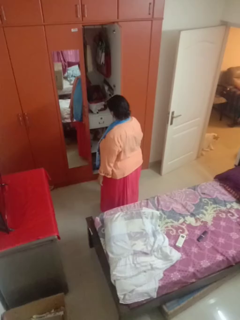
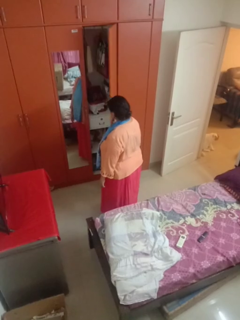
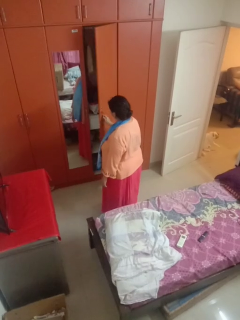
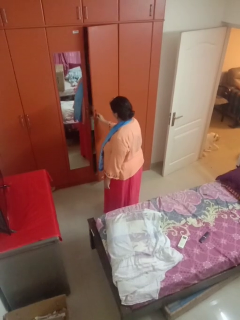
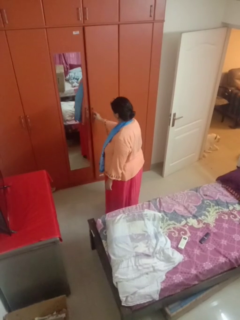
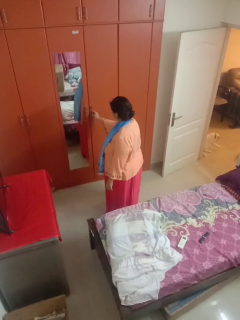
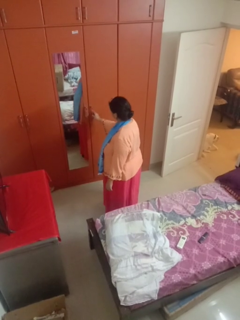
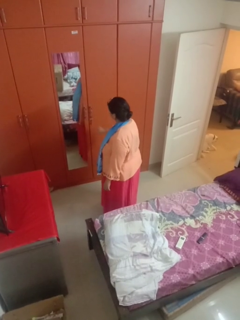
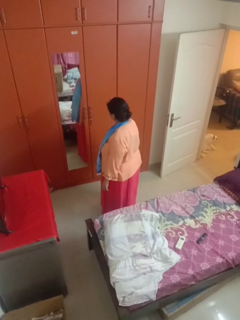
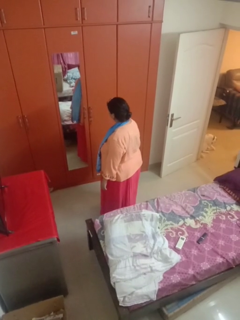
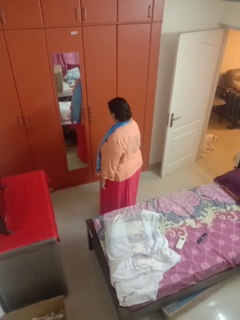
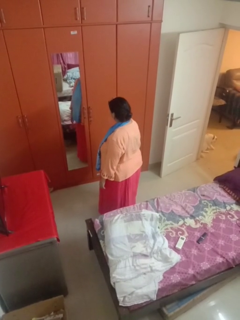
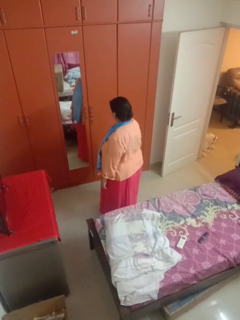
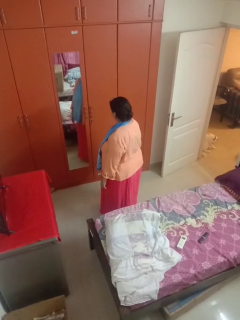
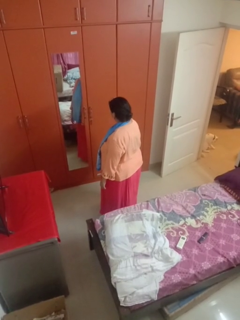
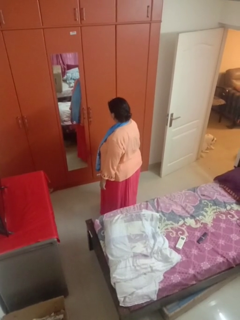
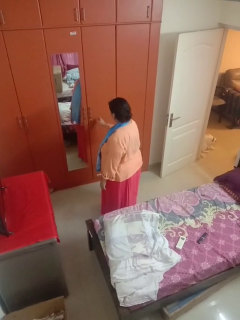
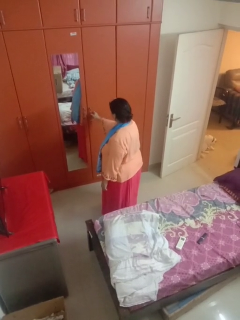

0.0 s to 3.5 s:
person closes closet door

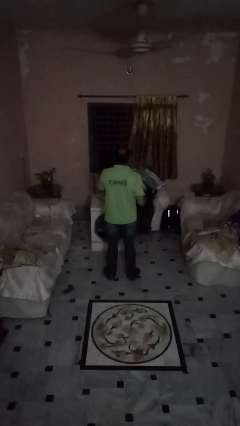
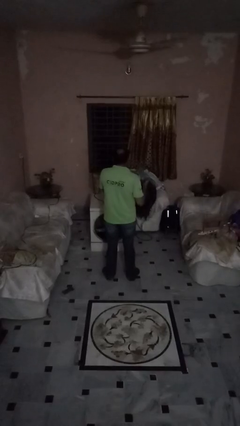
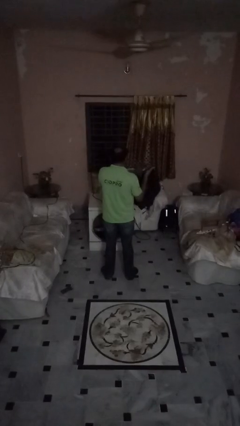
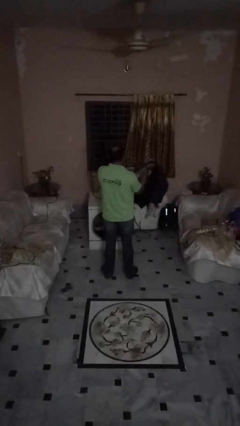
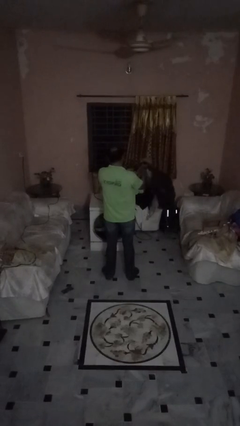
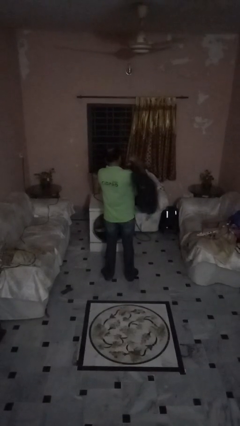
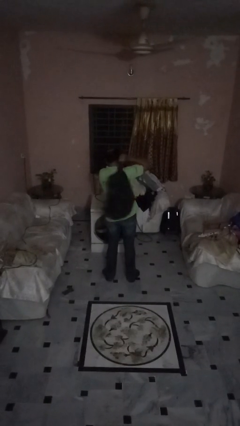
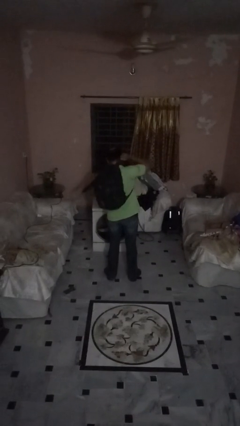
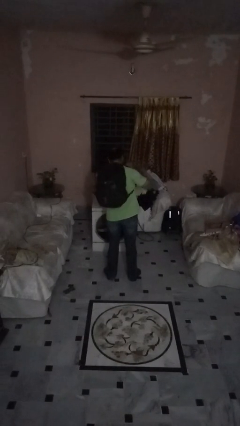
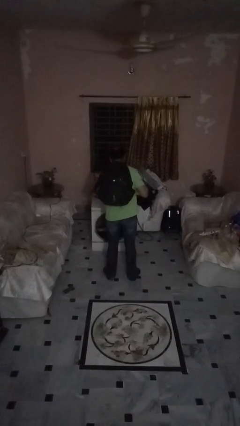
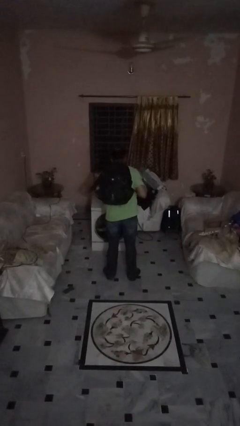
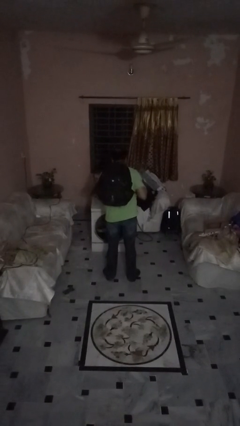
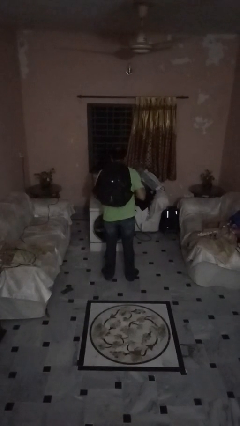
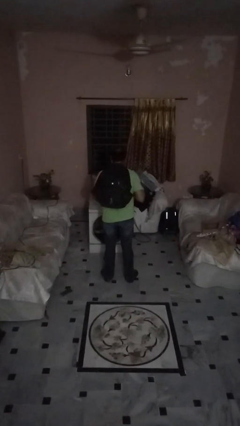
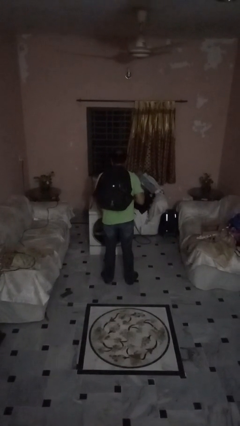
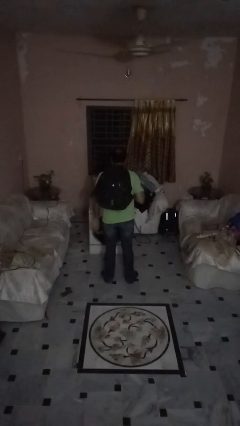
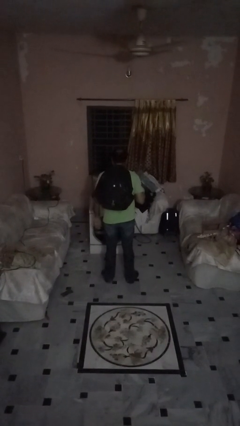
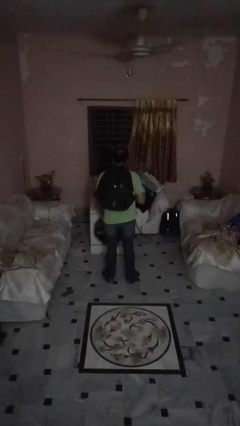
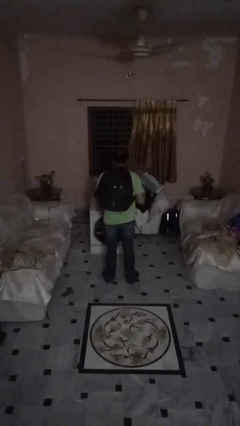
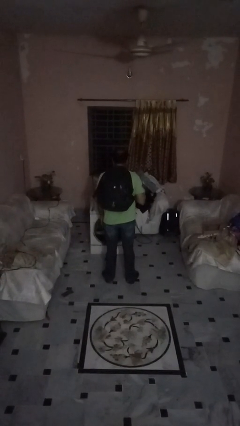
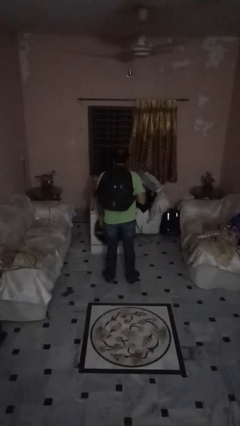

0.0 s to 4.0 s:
person puts on backpack

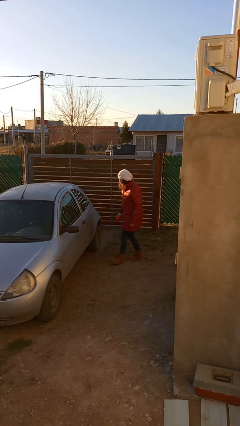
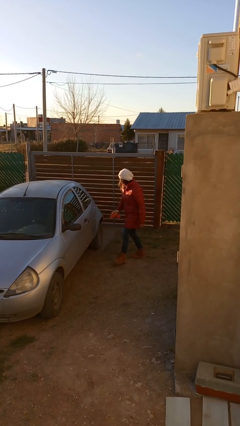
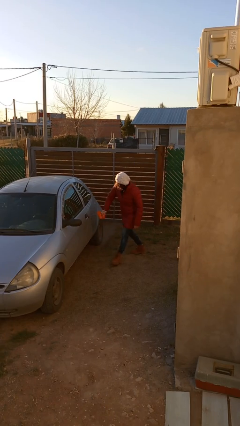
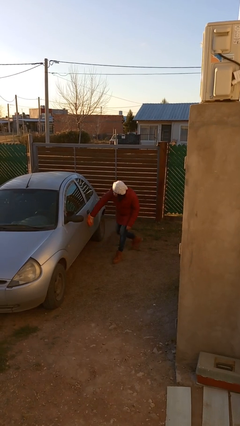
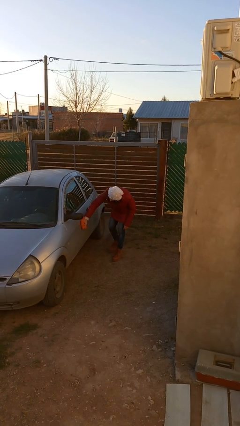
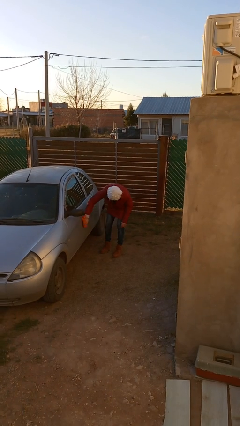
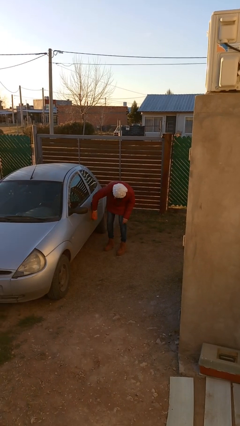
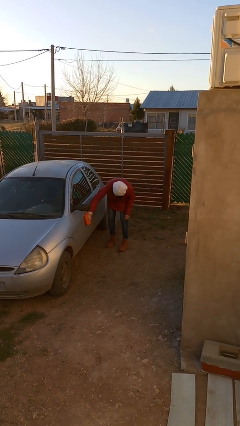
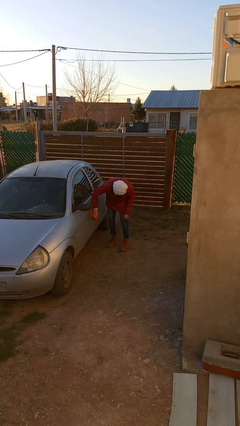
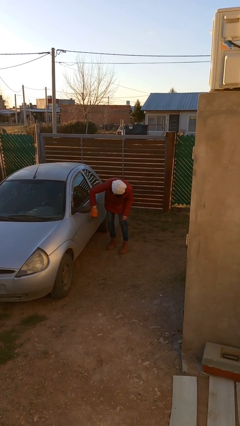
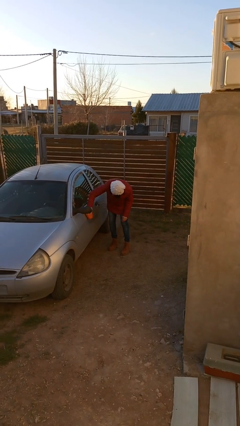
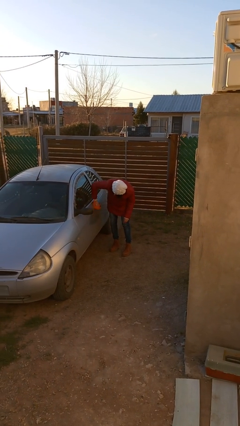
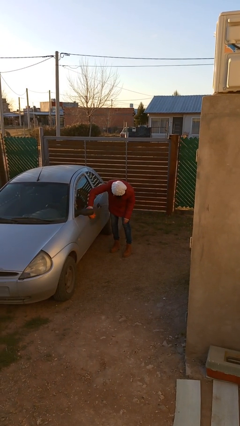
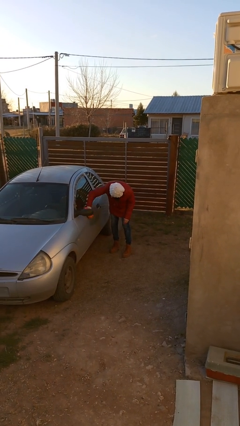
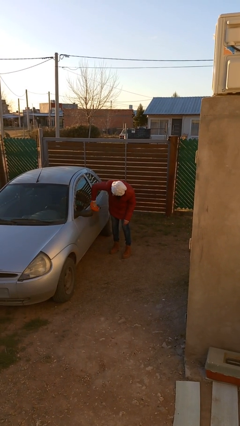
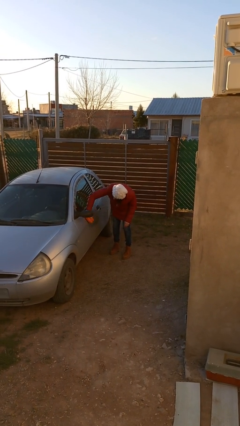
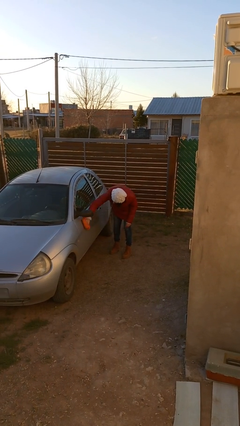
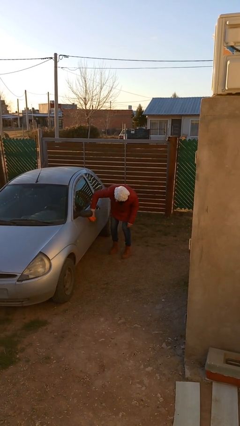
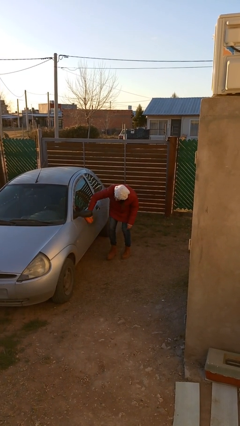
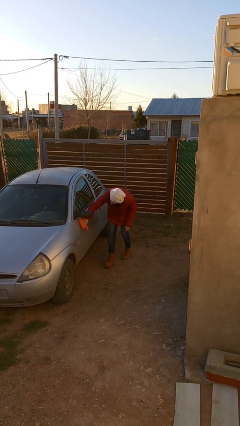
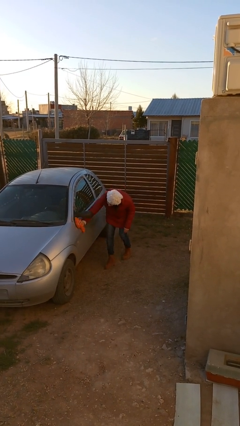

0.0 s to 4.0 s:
person polishes car with rag

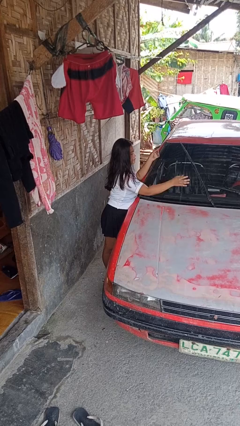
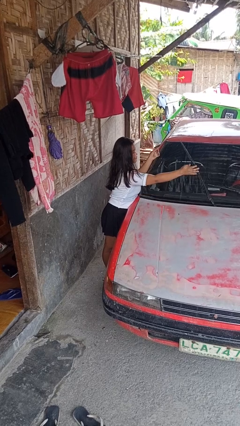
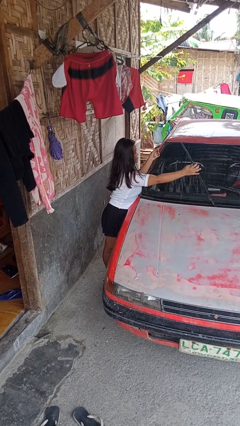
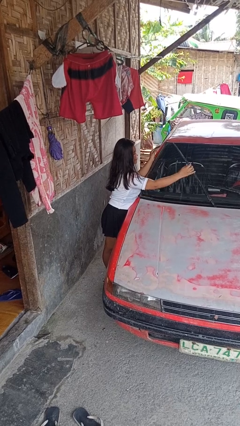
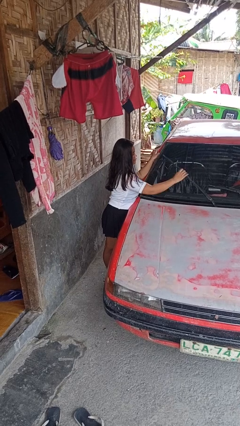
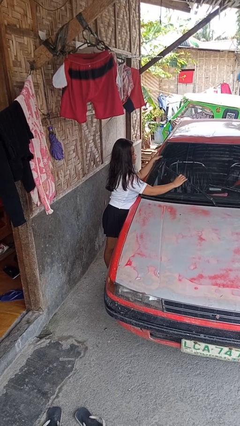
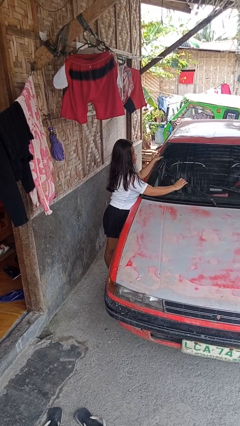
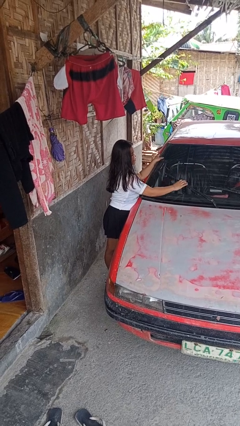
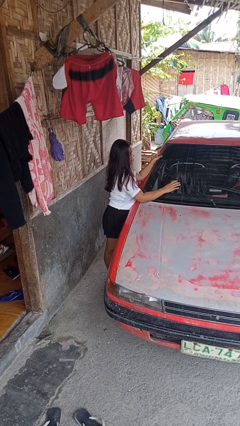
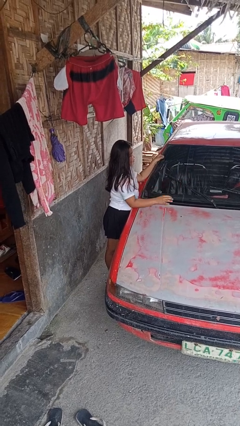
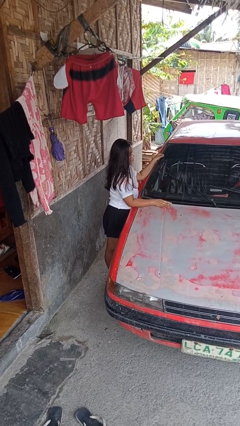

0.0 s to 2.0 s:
person flips down car wipers

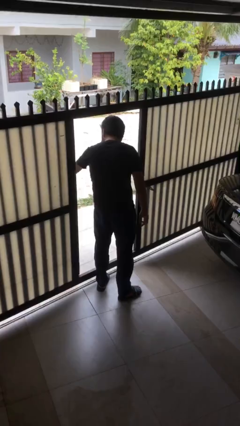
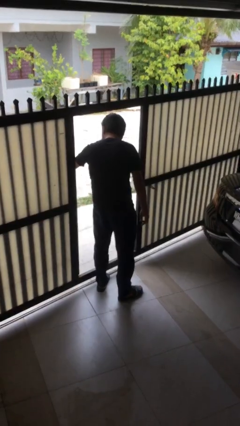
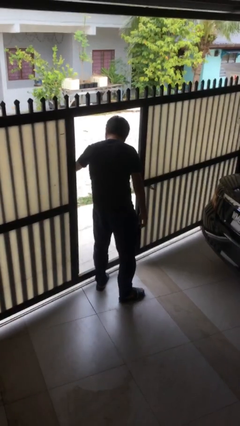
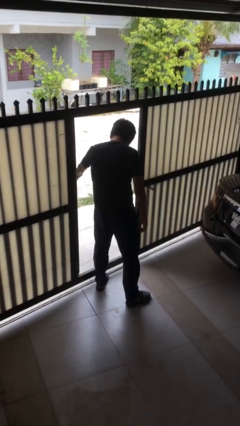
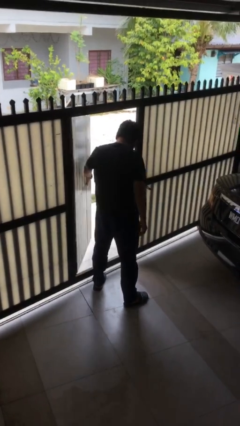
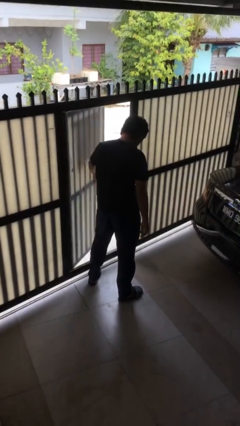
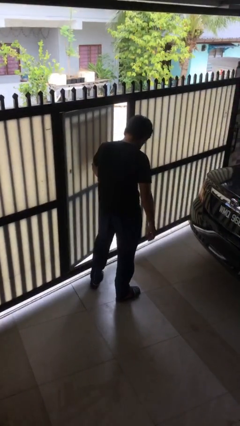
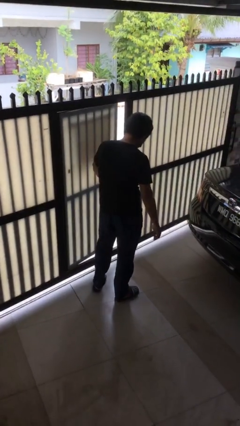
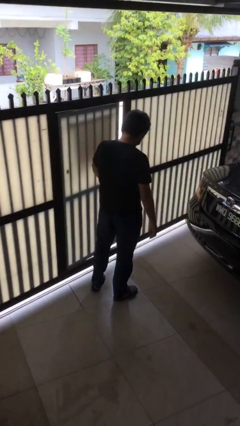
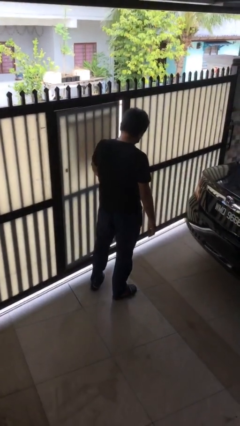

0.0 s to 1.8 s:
person closes gate

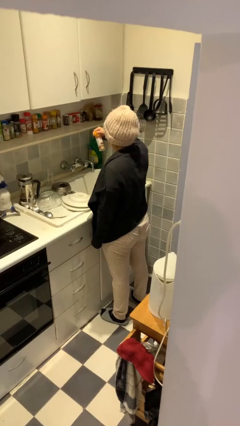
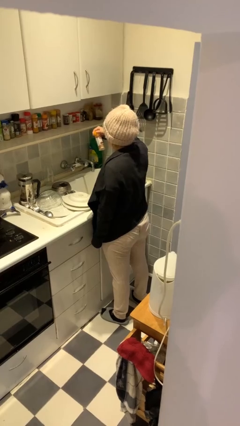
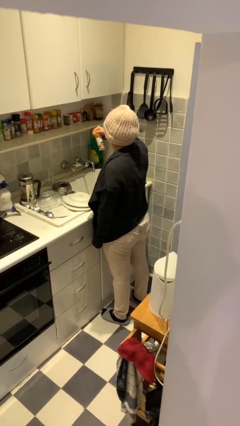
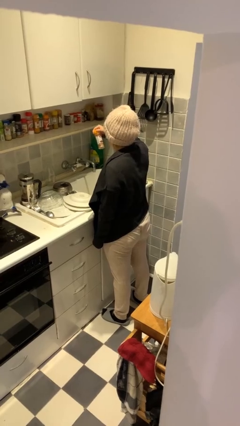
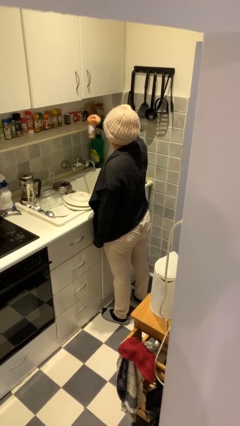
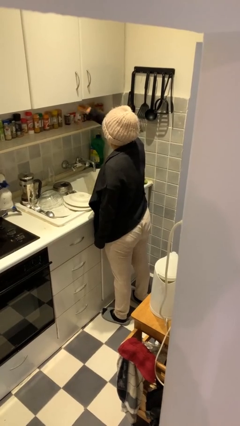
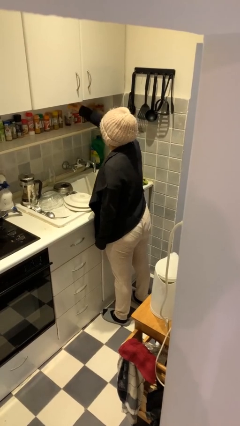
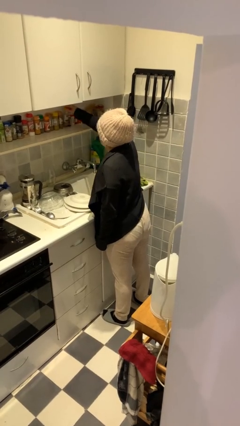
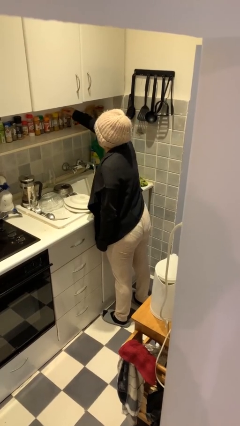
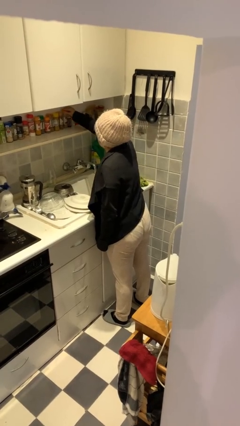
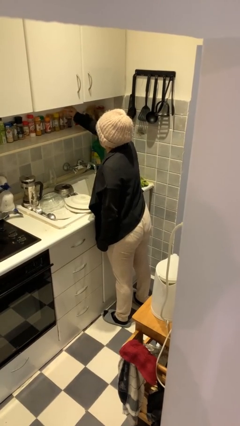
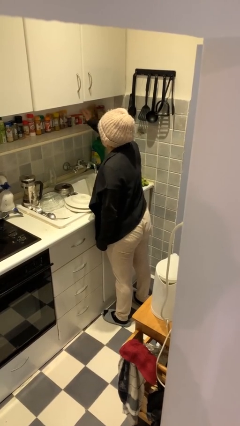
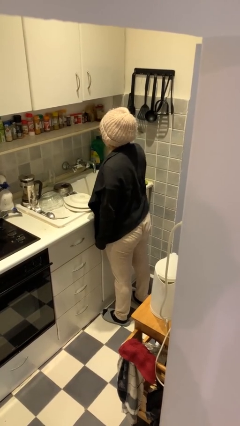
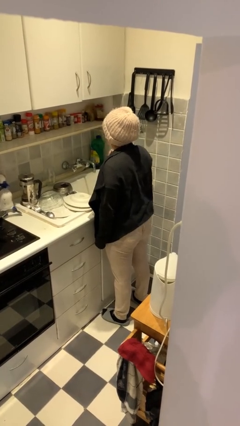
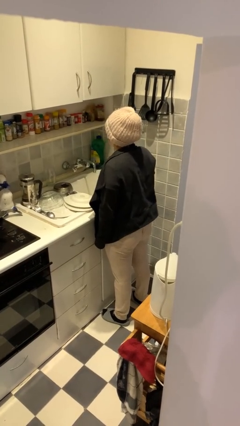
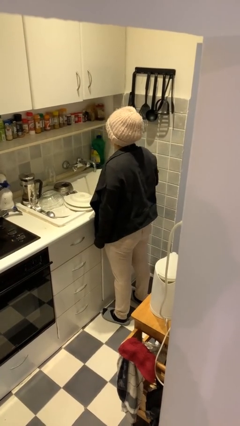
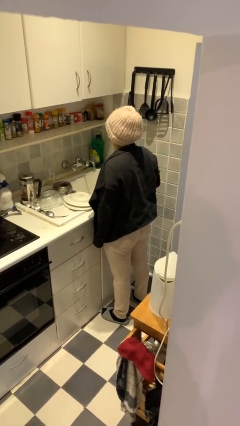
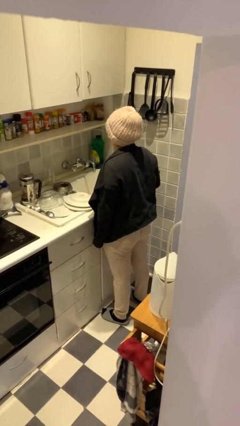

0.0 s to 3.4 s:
person puts down object on countertop
